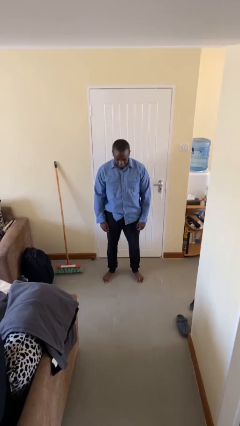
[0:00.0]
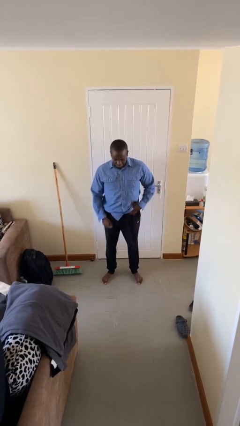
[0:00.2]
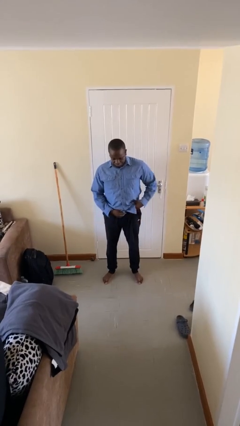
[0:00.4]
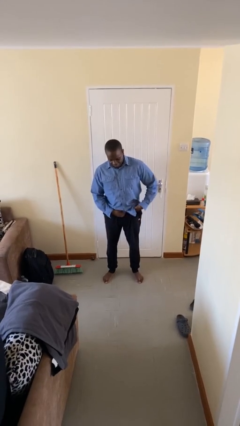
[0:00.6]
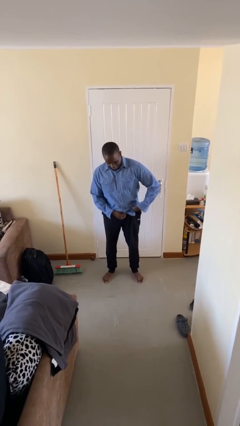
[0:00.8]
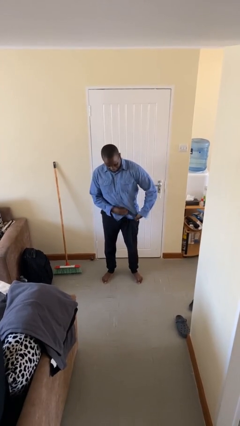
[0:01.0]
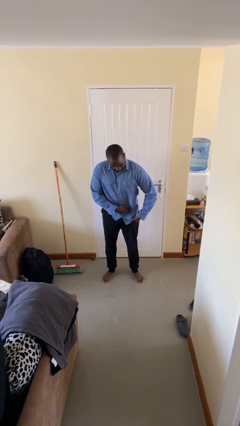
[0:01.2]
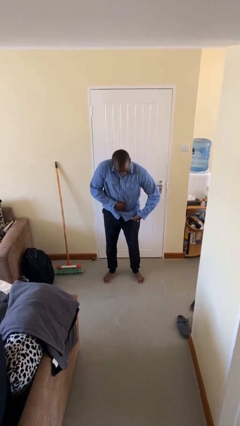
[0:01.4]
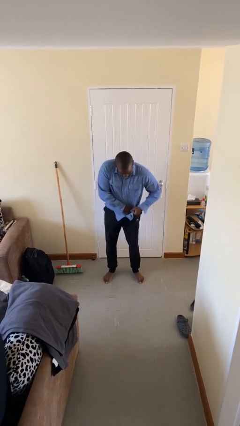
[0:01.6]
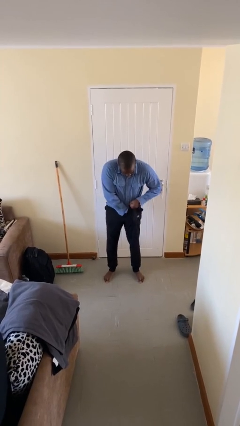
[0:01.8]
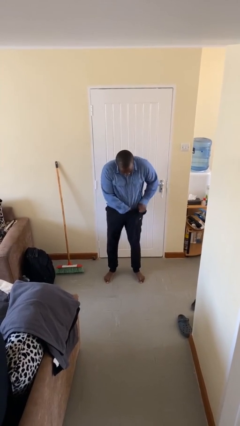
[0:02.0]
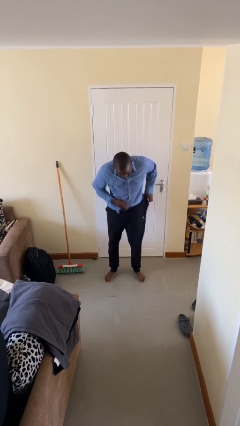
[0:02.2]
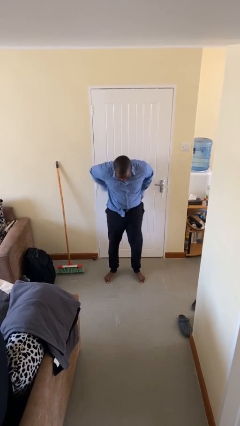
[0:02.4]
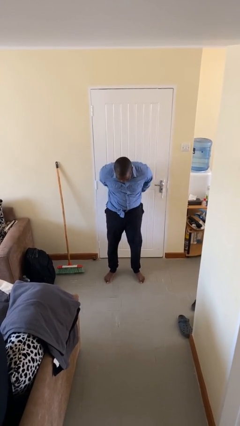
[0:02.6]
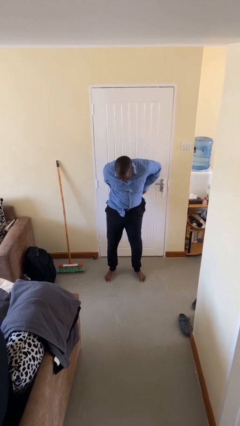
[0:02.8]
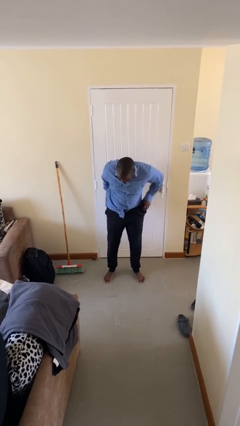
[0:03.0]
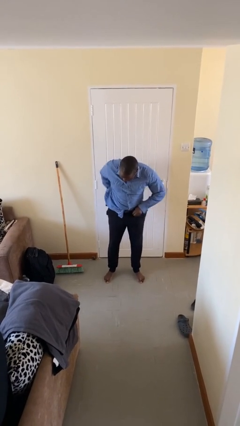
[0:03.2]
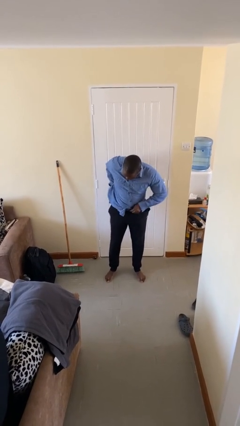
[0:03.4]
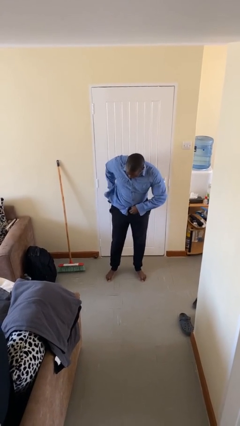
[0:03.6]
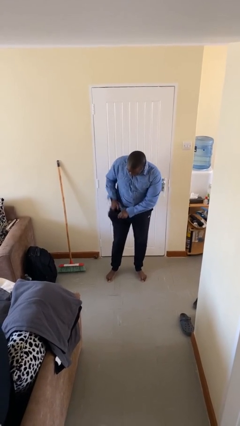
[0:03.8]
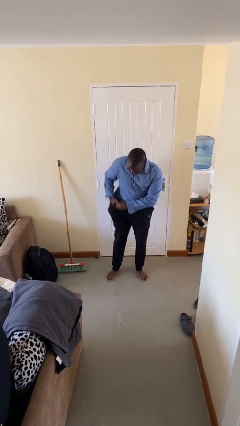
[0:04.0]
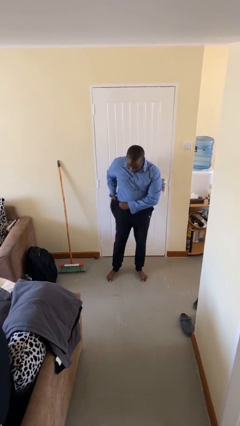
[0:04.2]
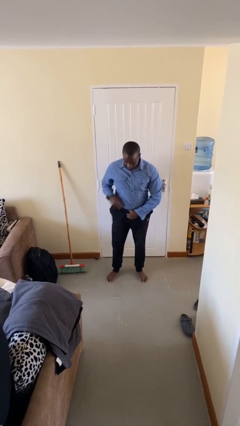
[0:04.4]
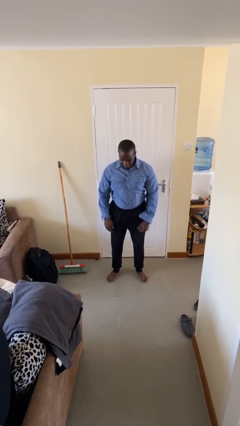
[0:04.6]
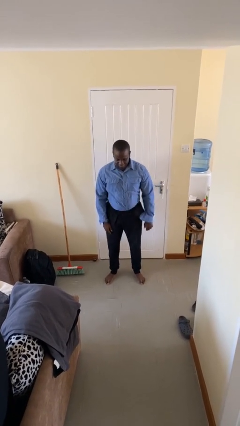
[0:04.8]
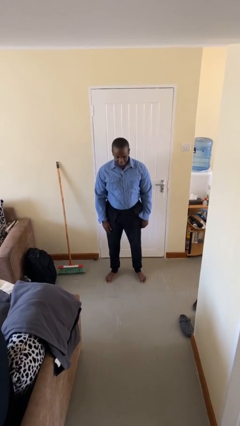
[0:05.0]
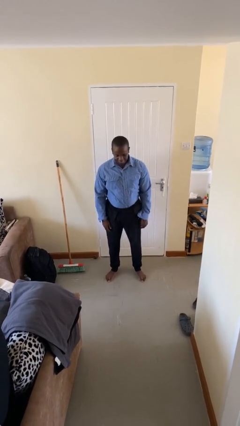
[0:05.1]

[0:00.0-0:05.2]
person tucks in shirt

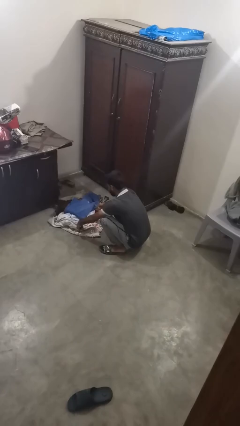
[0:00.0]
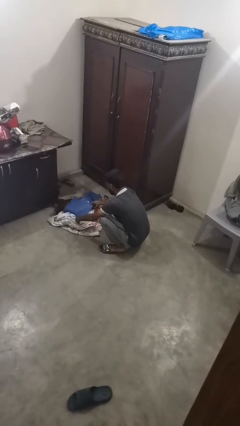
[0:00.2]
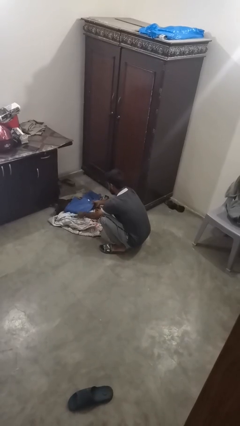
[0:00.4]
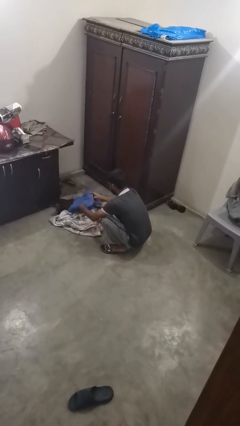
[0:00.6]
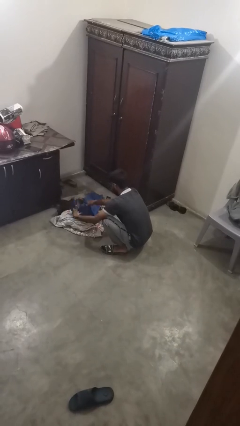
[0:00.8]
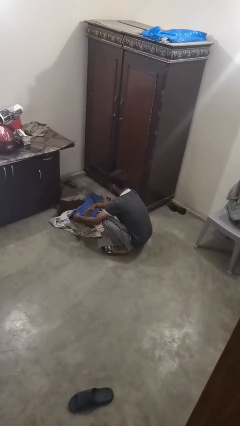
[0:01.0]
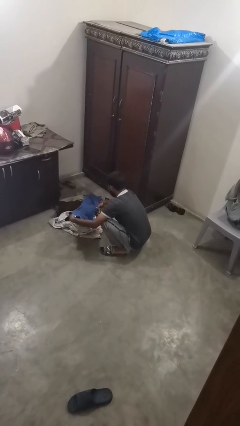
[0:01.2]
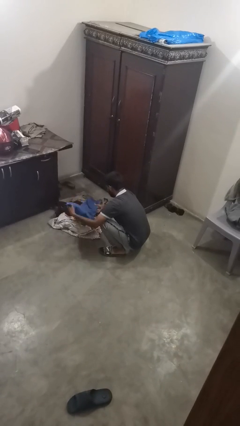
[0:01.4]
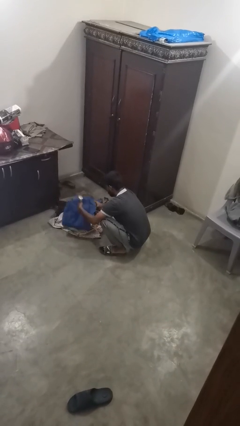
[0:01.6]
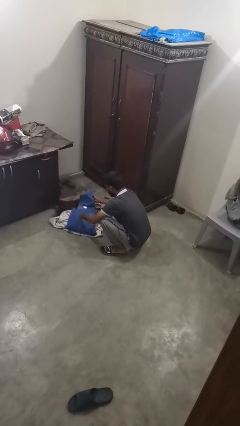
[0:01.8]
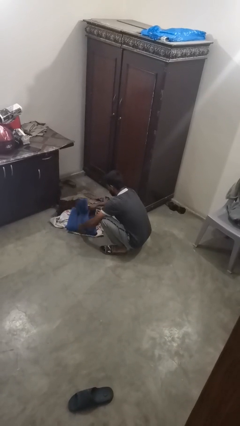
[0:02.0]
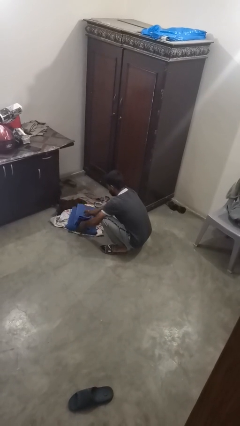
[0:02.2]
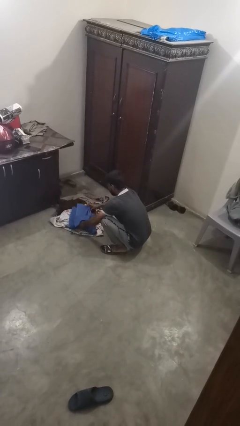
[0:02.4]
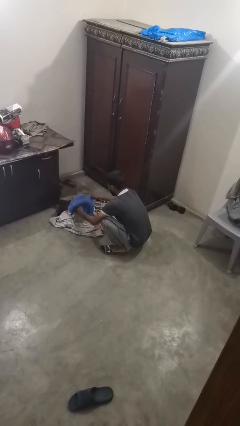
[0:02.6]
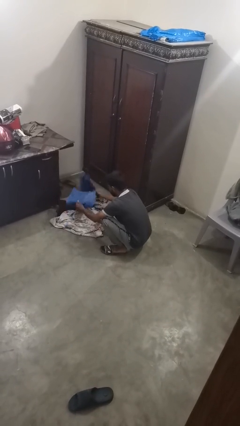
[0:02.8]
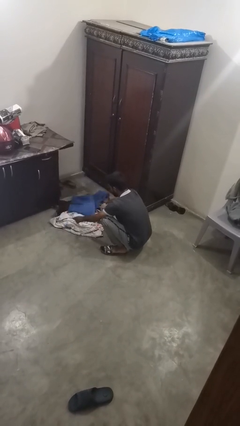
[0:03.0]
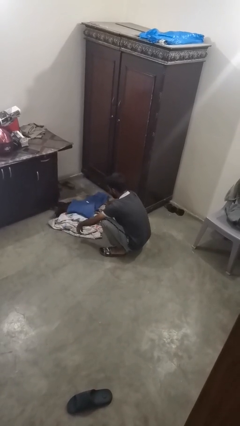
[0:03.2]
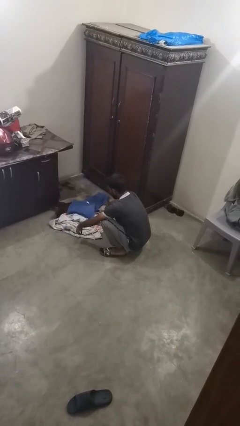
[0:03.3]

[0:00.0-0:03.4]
person folds pants

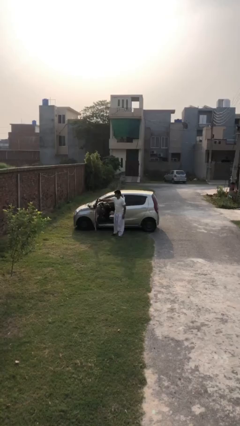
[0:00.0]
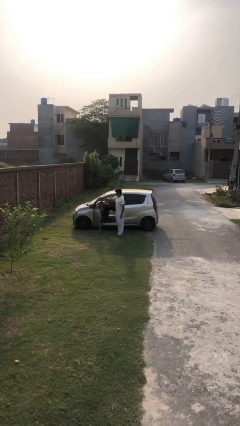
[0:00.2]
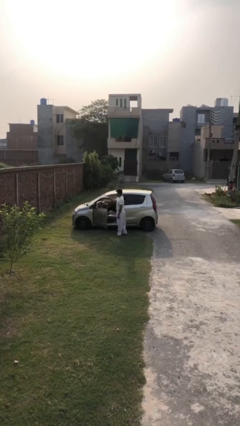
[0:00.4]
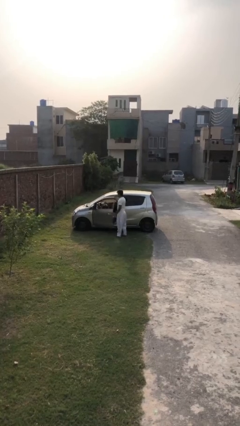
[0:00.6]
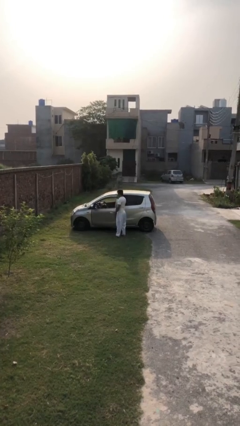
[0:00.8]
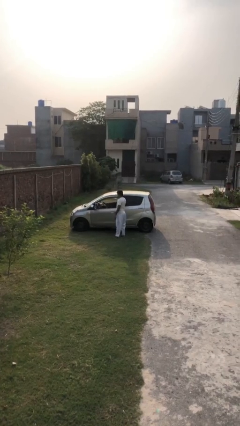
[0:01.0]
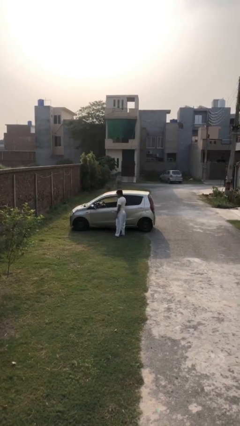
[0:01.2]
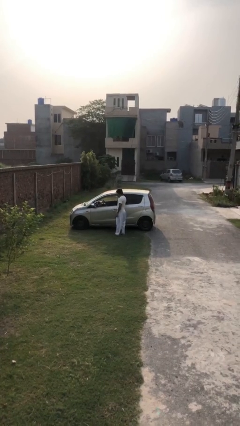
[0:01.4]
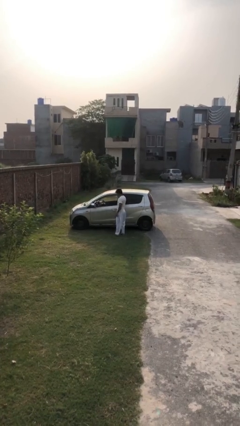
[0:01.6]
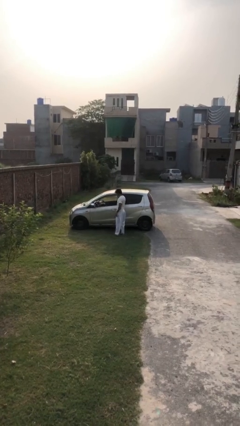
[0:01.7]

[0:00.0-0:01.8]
person closes car door

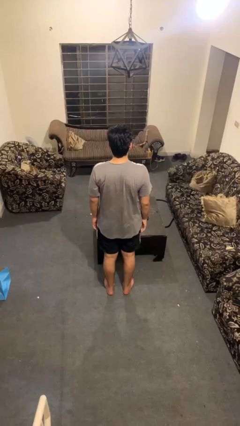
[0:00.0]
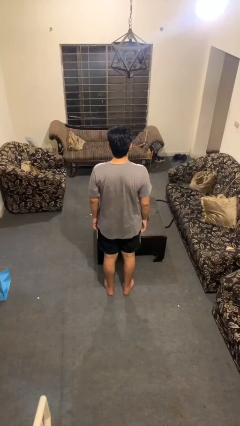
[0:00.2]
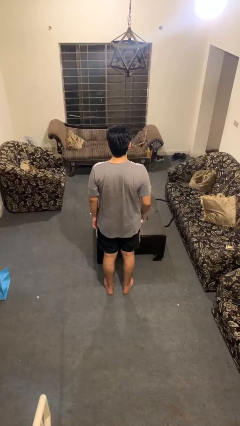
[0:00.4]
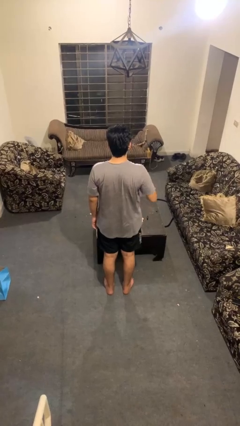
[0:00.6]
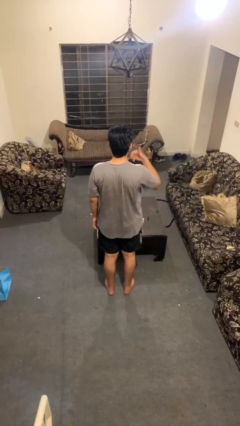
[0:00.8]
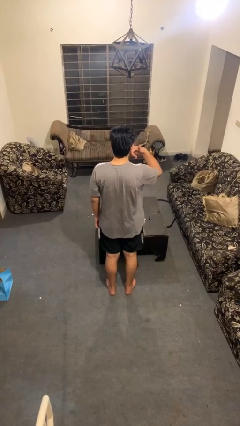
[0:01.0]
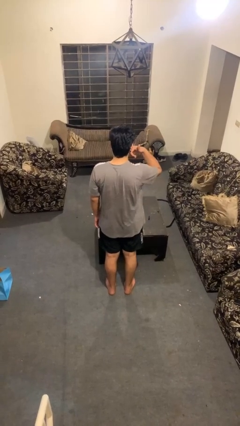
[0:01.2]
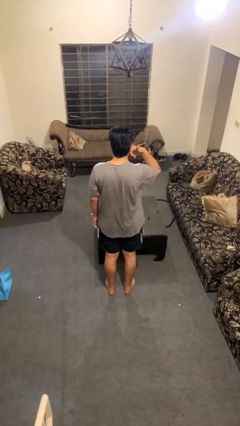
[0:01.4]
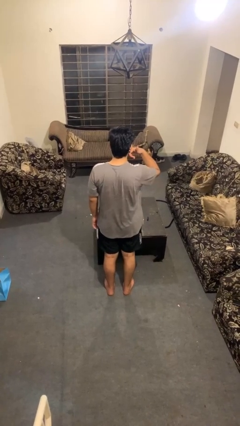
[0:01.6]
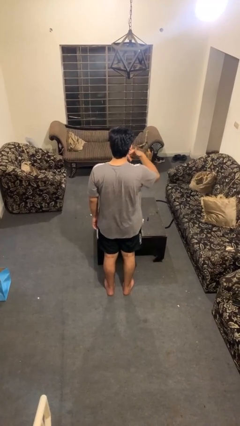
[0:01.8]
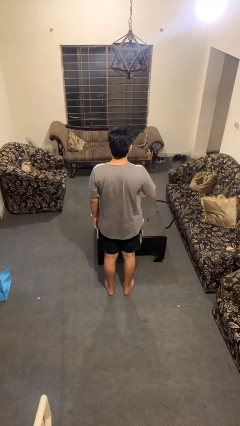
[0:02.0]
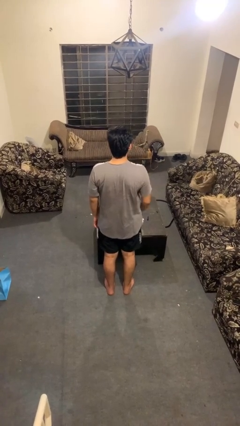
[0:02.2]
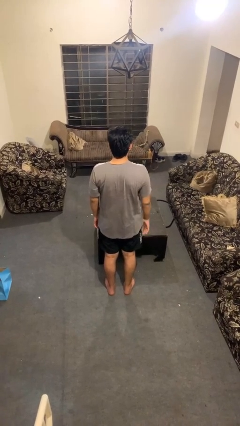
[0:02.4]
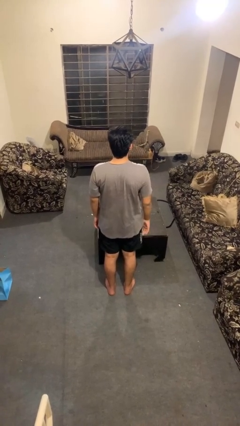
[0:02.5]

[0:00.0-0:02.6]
person gestures call me

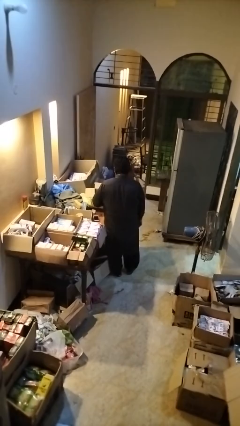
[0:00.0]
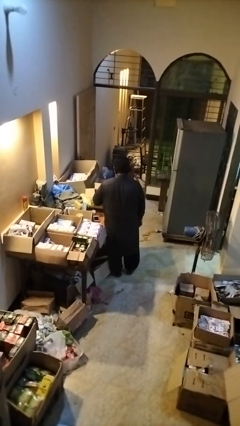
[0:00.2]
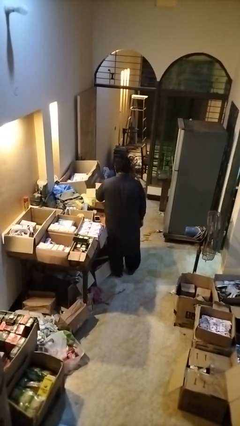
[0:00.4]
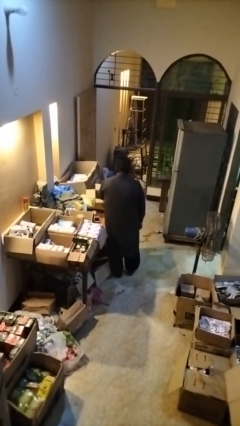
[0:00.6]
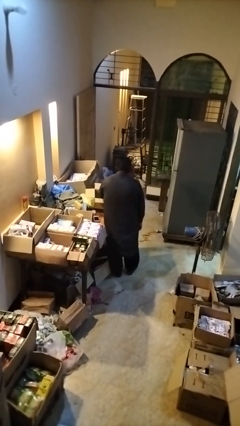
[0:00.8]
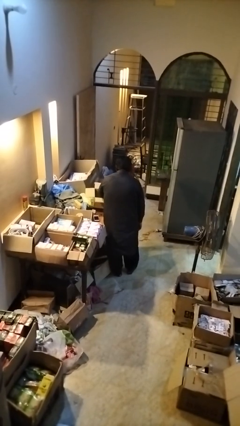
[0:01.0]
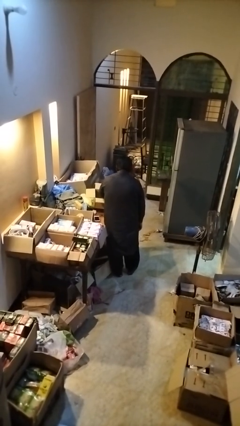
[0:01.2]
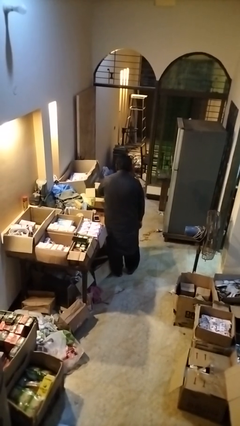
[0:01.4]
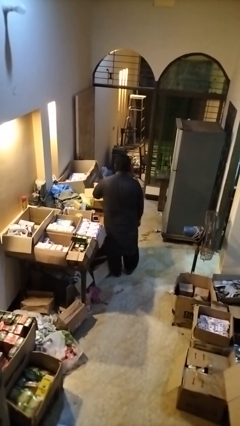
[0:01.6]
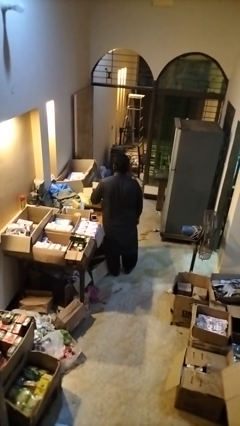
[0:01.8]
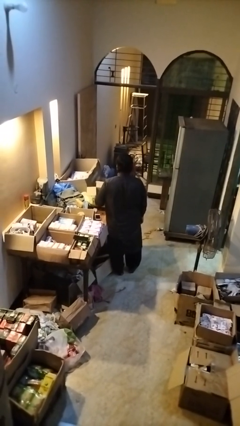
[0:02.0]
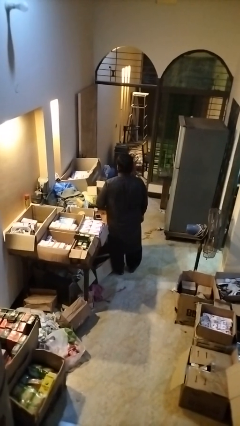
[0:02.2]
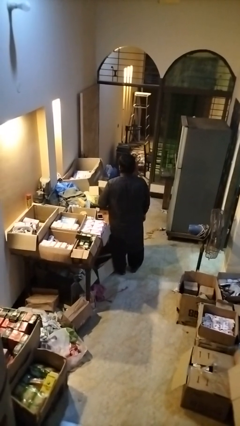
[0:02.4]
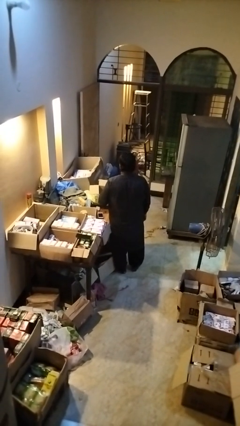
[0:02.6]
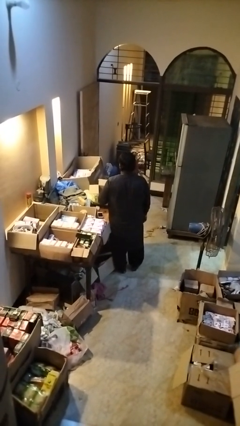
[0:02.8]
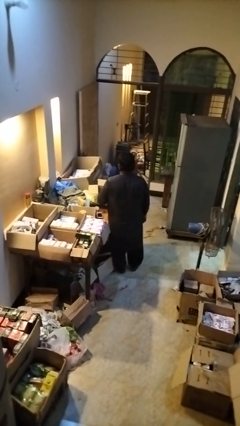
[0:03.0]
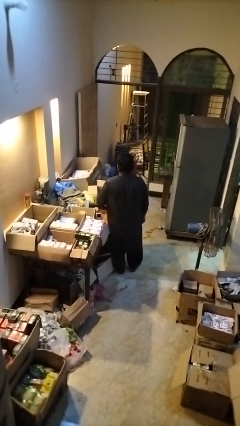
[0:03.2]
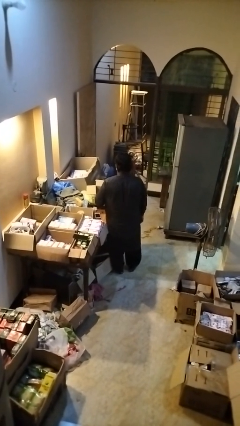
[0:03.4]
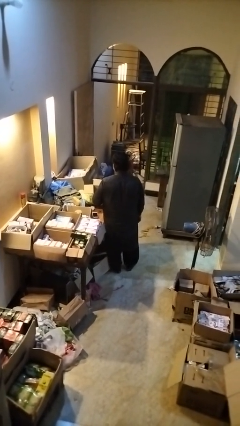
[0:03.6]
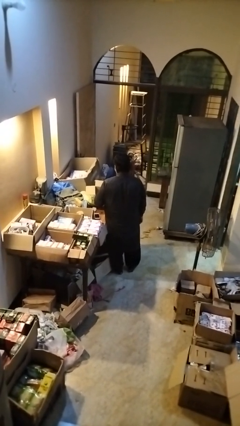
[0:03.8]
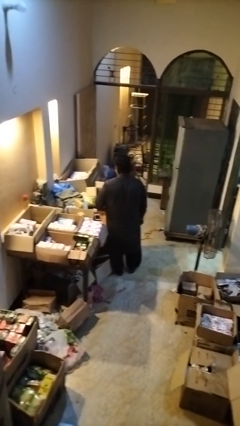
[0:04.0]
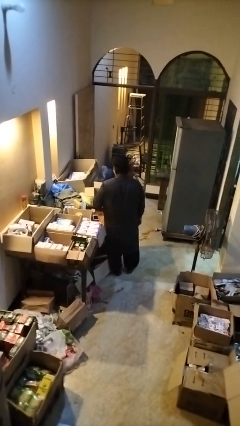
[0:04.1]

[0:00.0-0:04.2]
person takes object from box

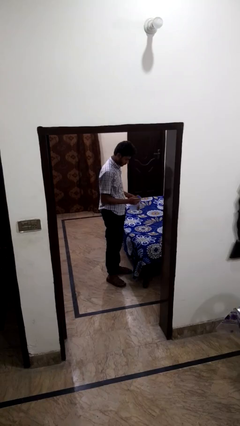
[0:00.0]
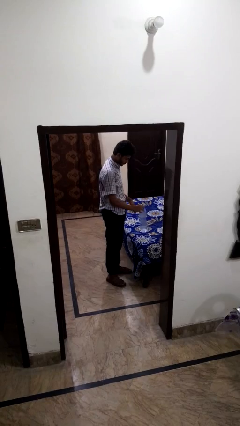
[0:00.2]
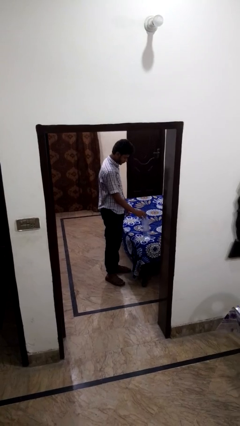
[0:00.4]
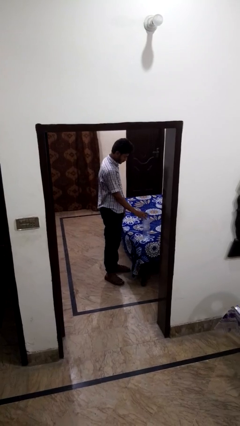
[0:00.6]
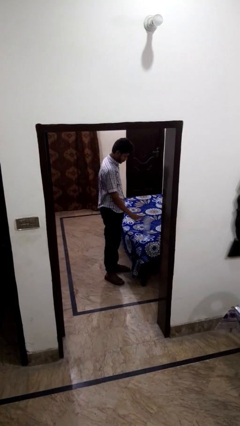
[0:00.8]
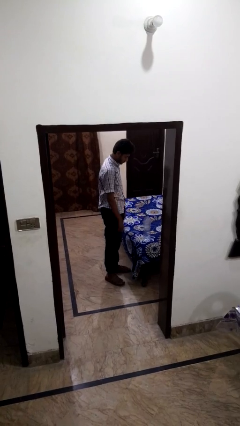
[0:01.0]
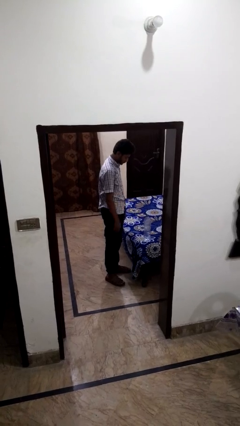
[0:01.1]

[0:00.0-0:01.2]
person puts down object on bed
